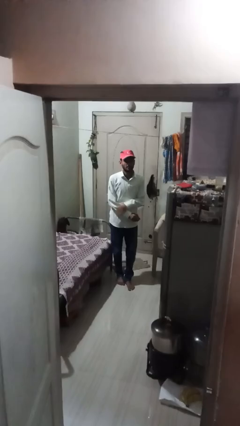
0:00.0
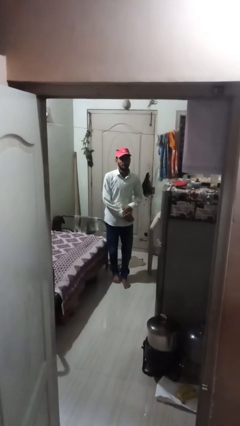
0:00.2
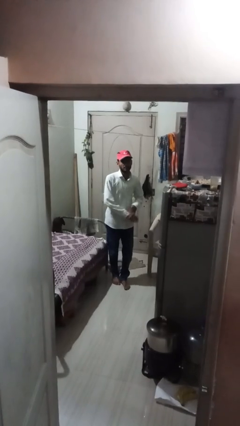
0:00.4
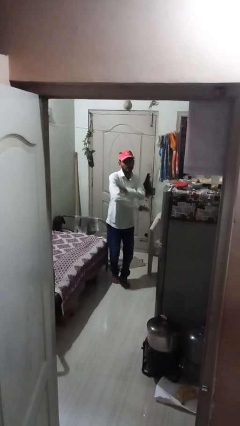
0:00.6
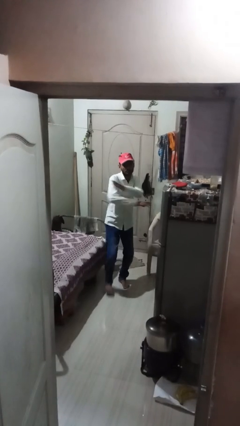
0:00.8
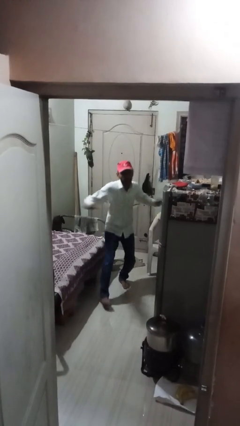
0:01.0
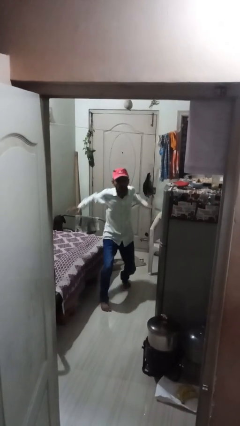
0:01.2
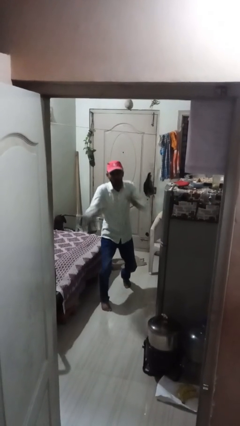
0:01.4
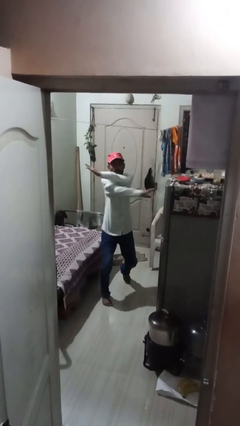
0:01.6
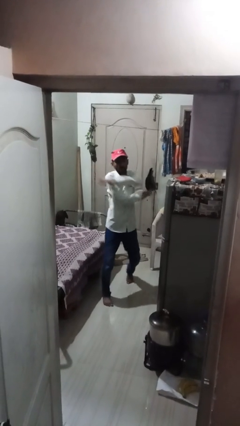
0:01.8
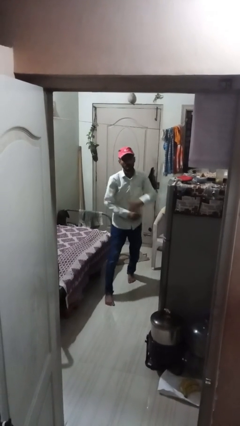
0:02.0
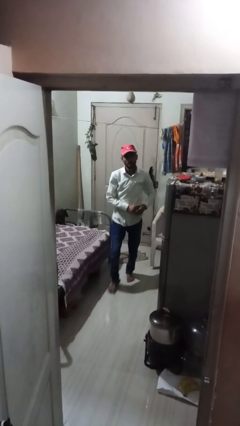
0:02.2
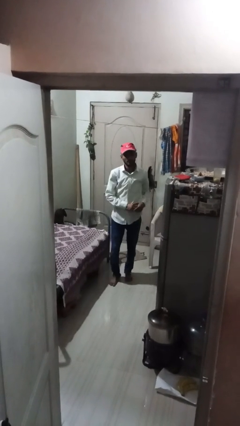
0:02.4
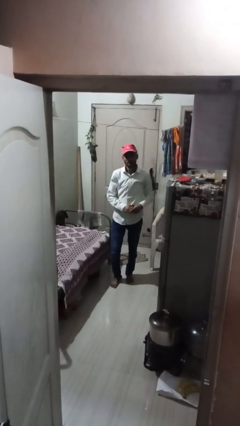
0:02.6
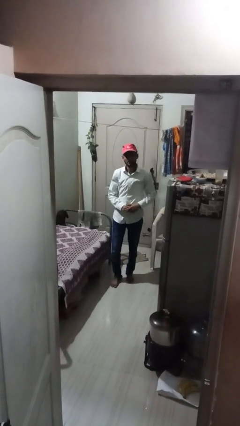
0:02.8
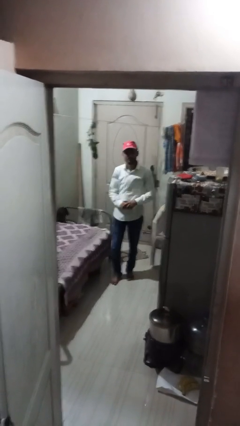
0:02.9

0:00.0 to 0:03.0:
person karate chop

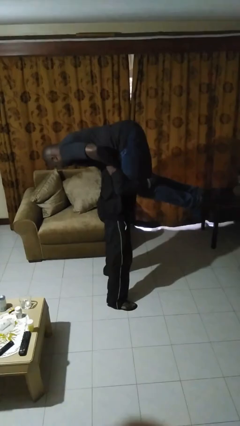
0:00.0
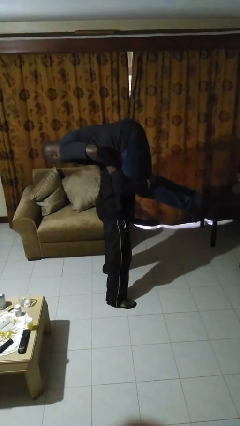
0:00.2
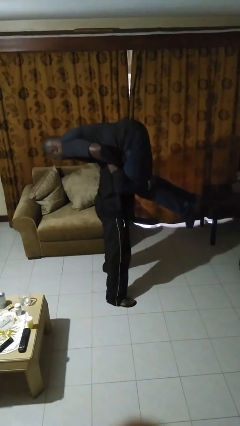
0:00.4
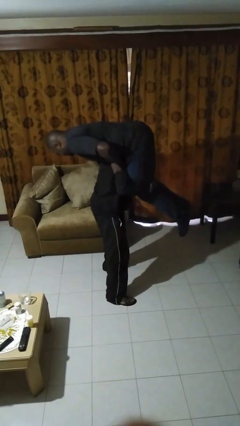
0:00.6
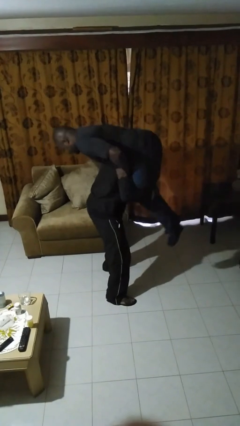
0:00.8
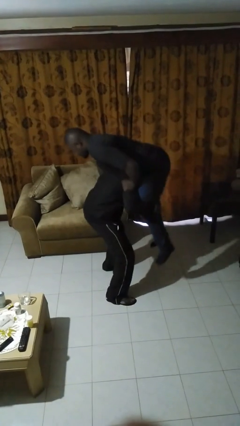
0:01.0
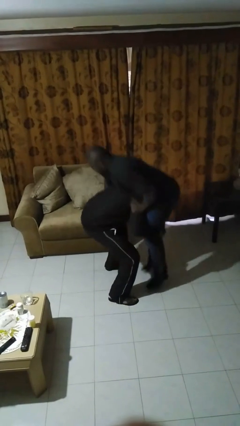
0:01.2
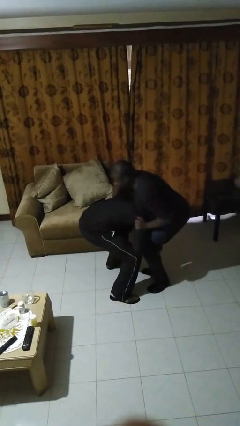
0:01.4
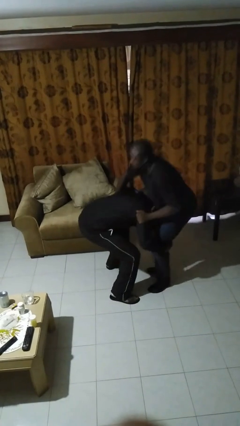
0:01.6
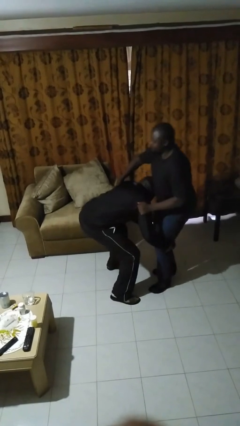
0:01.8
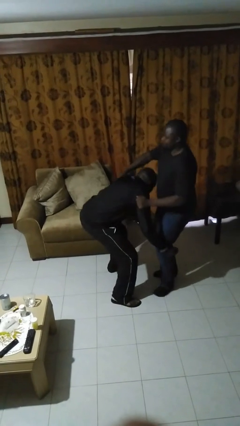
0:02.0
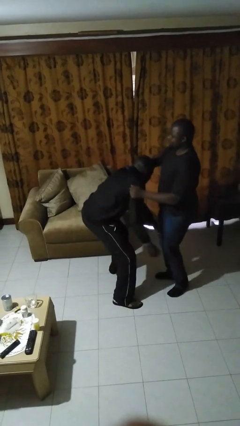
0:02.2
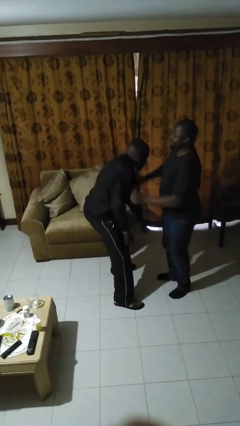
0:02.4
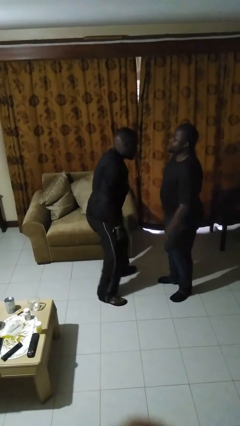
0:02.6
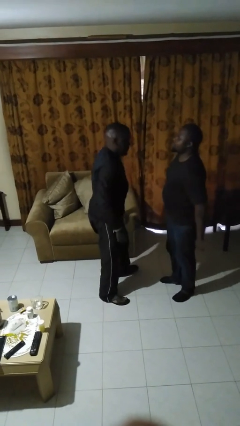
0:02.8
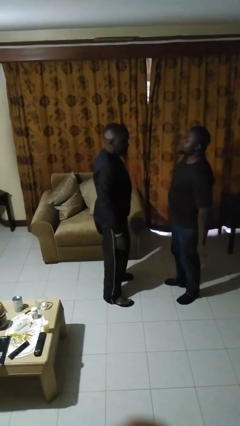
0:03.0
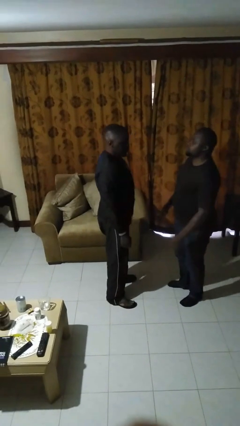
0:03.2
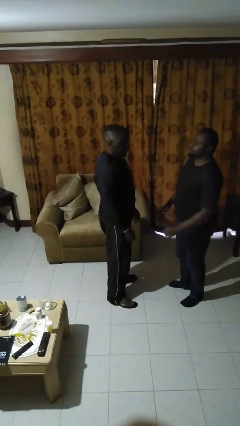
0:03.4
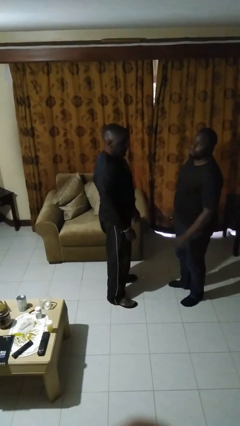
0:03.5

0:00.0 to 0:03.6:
person puts down person

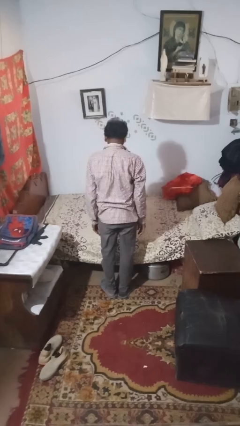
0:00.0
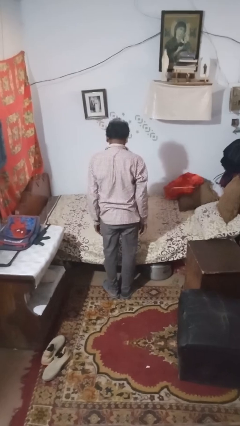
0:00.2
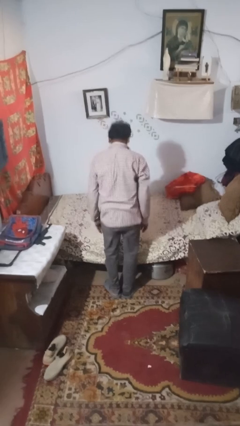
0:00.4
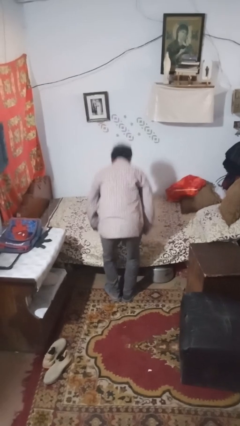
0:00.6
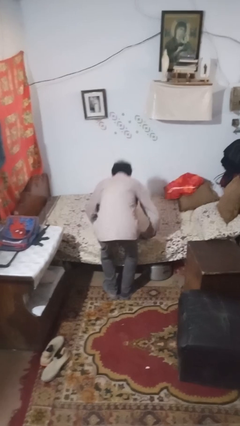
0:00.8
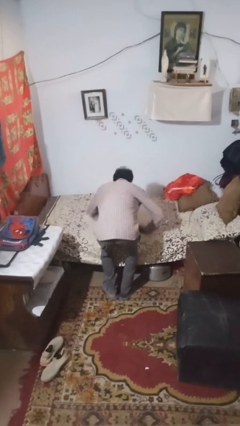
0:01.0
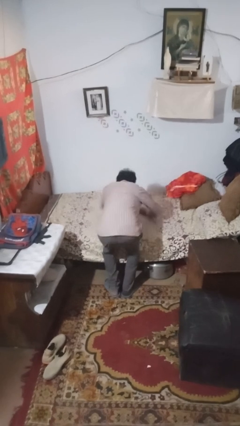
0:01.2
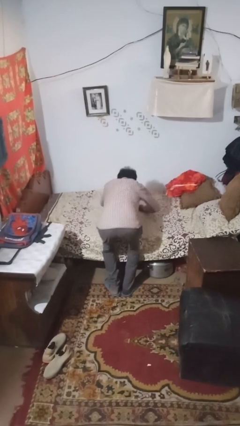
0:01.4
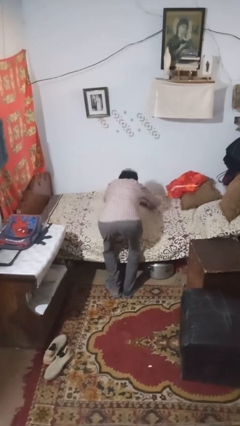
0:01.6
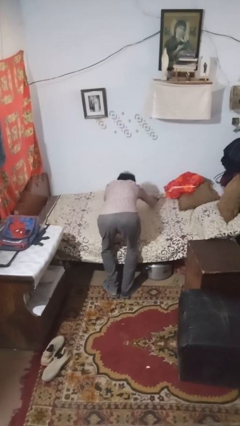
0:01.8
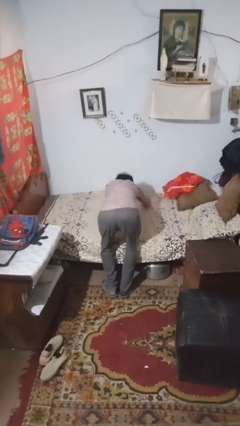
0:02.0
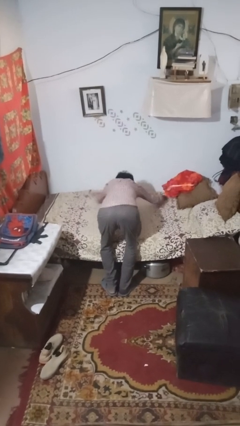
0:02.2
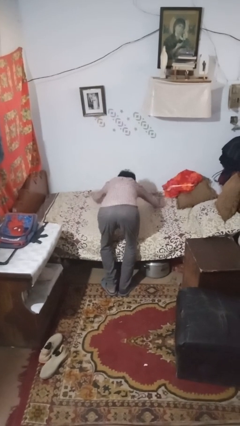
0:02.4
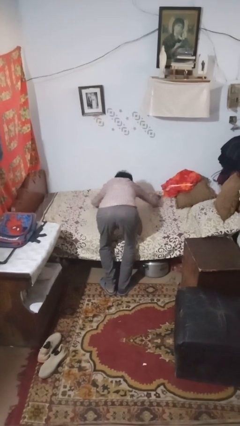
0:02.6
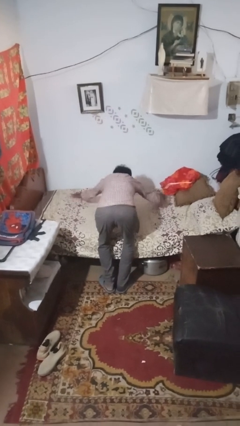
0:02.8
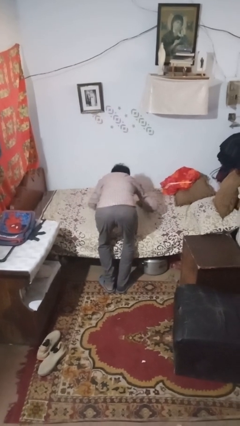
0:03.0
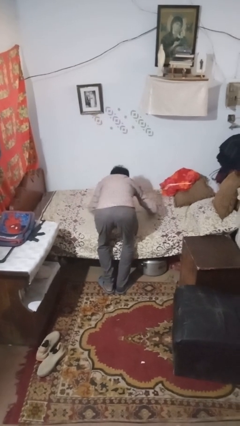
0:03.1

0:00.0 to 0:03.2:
person makes bed

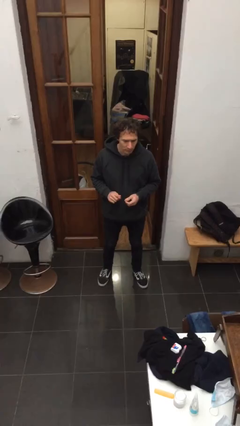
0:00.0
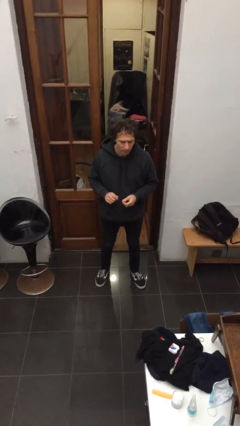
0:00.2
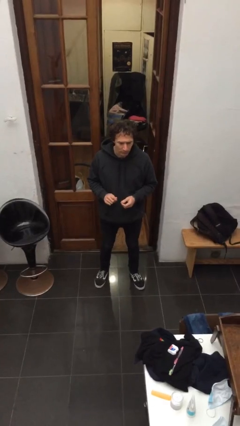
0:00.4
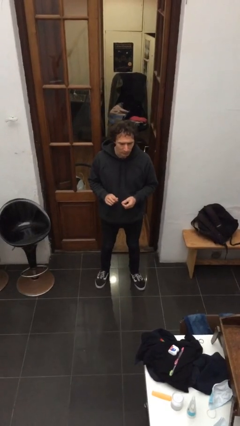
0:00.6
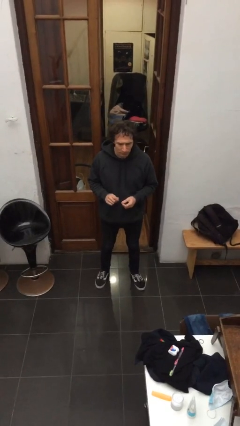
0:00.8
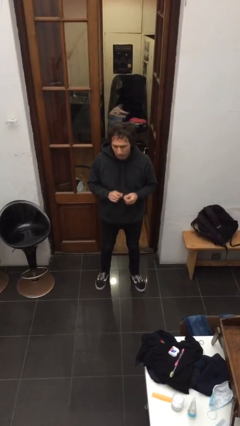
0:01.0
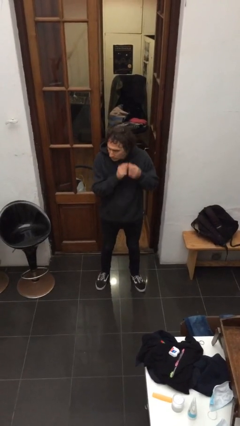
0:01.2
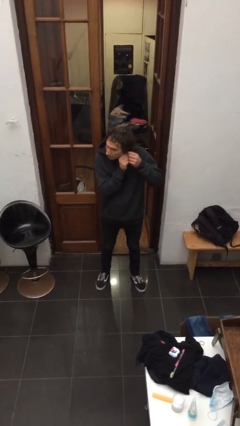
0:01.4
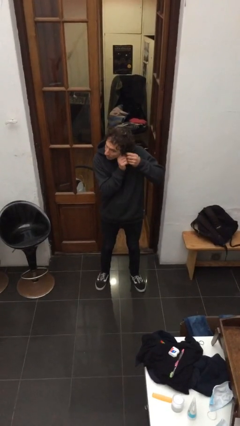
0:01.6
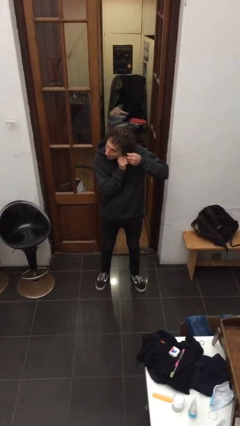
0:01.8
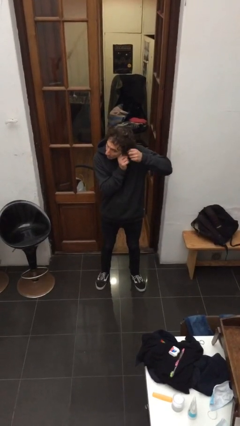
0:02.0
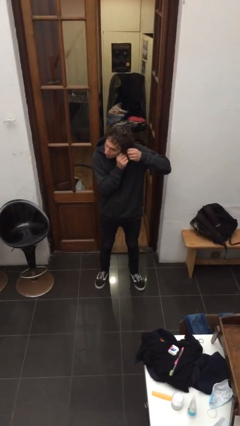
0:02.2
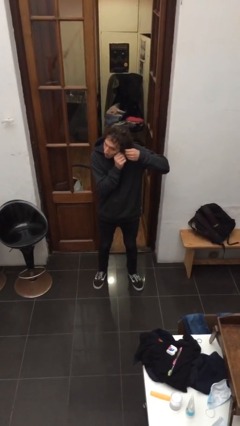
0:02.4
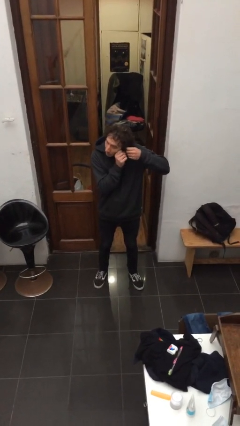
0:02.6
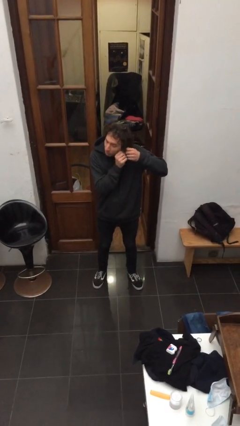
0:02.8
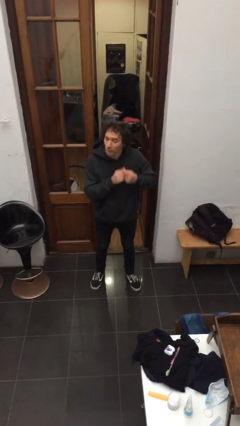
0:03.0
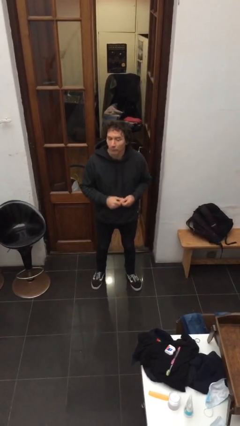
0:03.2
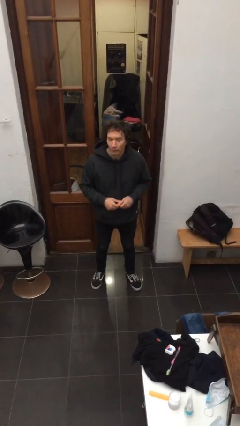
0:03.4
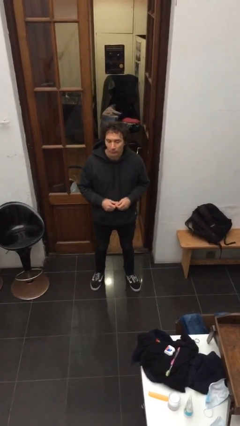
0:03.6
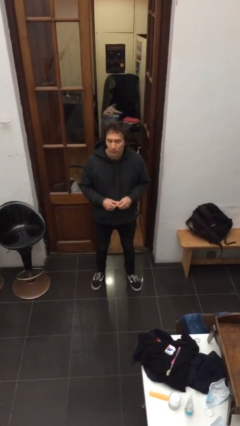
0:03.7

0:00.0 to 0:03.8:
person puts on earrings

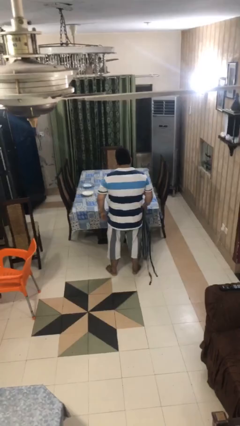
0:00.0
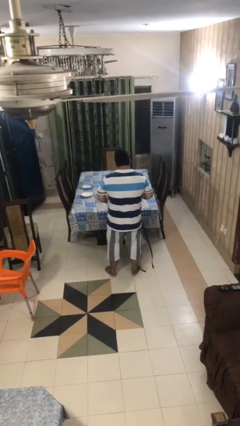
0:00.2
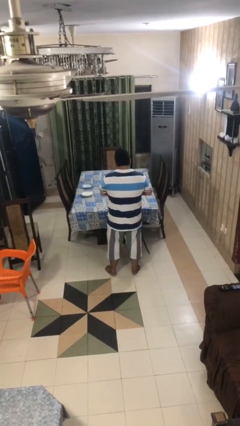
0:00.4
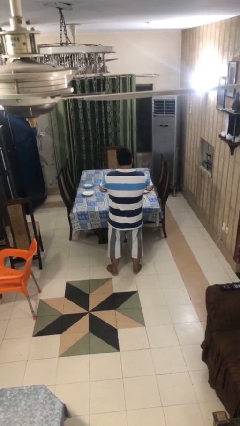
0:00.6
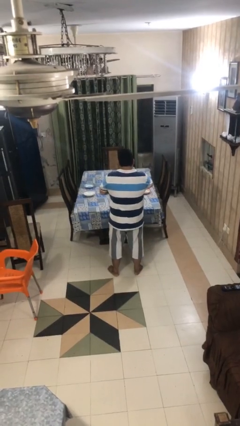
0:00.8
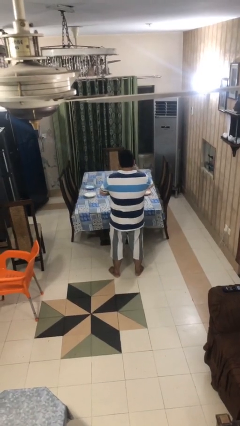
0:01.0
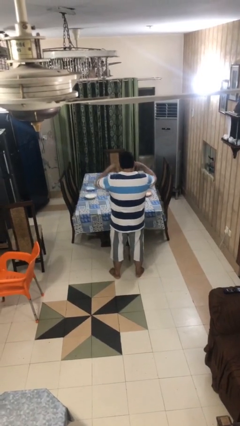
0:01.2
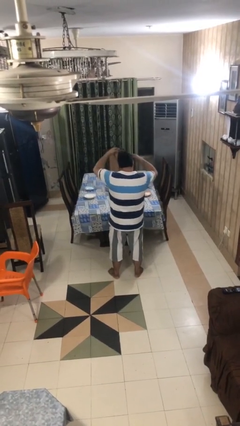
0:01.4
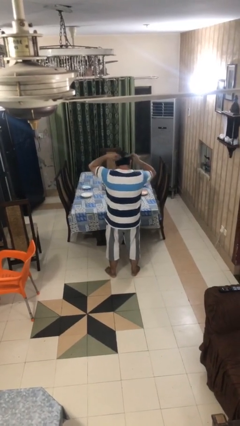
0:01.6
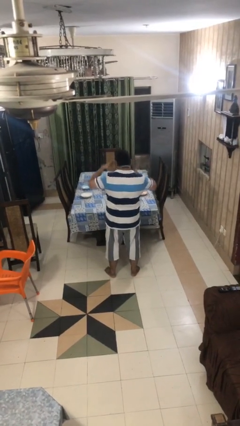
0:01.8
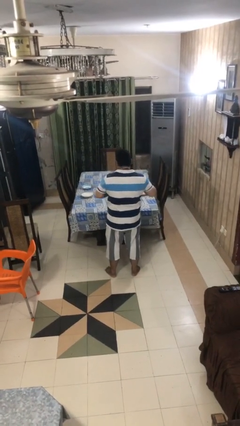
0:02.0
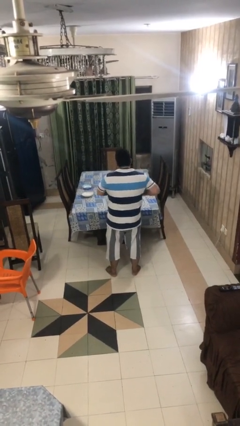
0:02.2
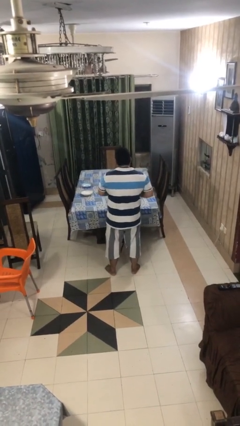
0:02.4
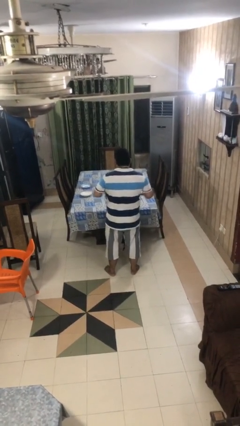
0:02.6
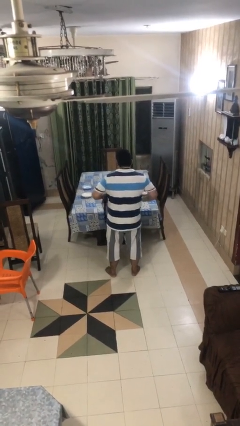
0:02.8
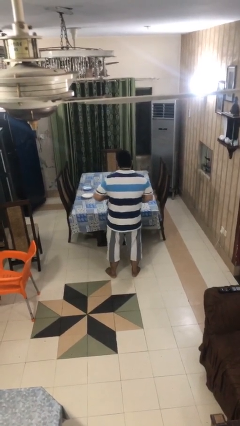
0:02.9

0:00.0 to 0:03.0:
person puts on apron

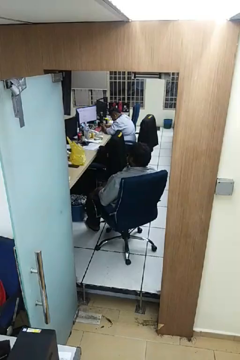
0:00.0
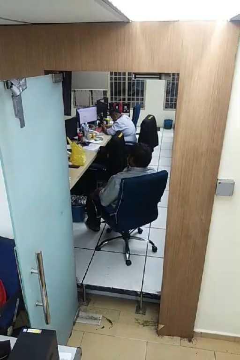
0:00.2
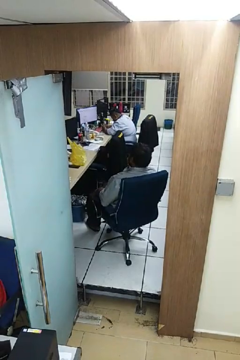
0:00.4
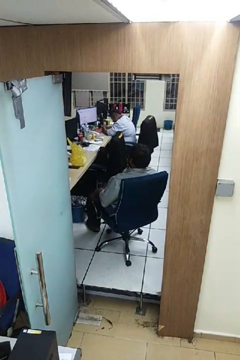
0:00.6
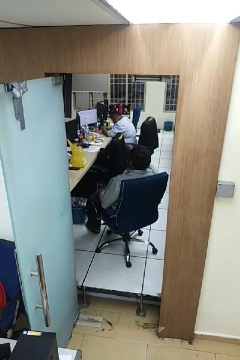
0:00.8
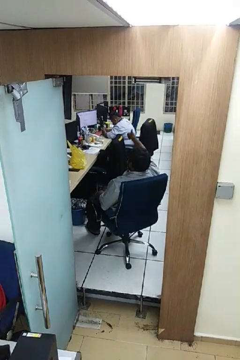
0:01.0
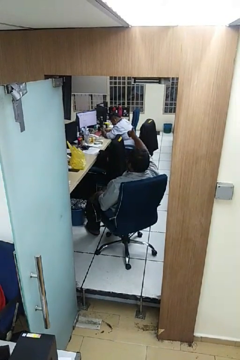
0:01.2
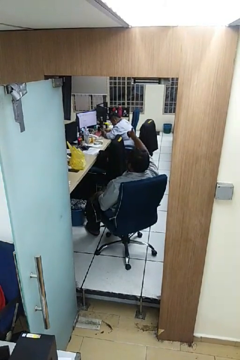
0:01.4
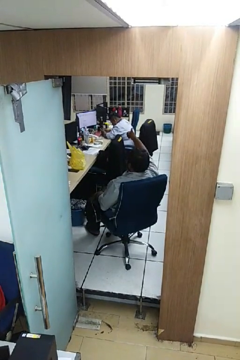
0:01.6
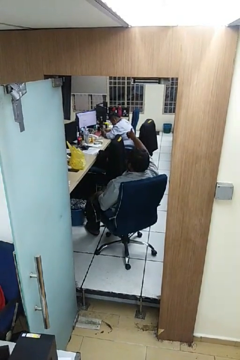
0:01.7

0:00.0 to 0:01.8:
person gestures thumbs up
